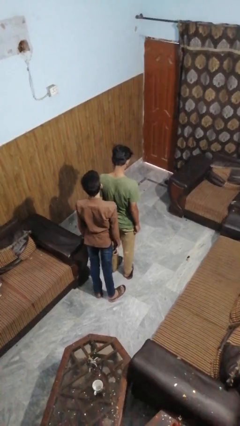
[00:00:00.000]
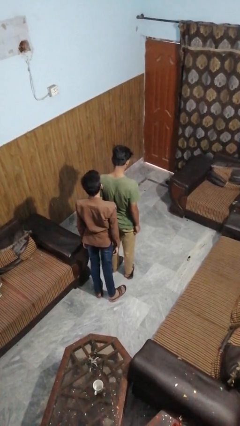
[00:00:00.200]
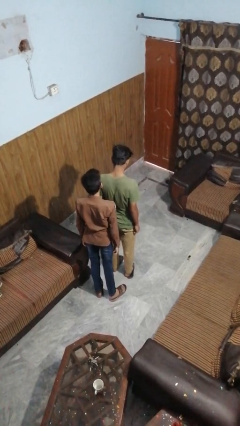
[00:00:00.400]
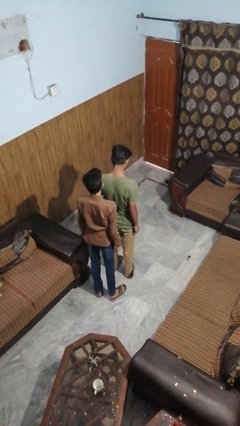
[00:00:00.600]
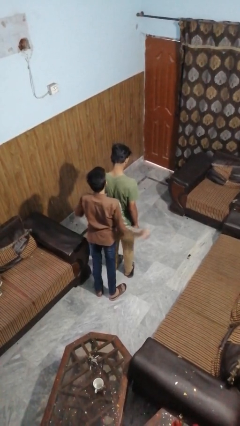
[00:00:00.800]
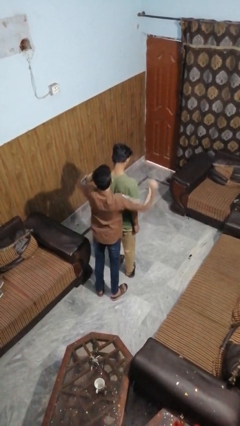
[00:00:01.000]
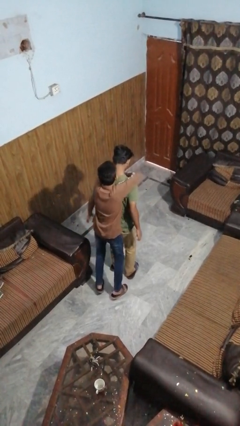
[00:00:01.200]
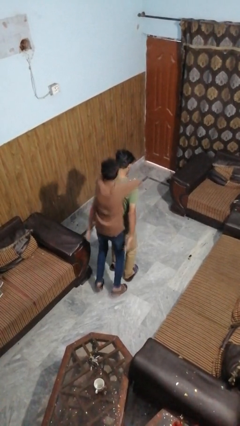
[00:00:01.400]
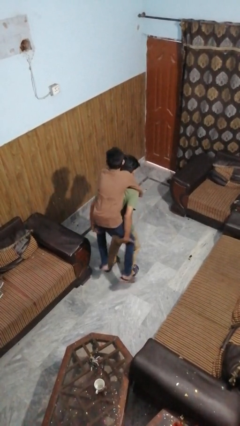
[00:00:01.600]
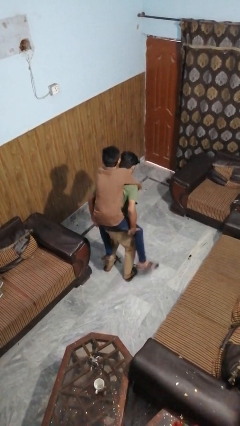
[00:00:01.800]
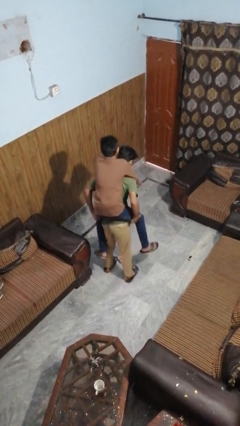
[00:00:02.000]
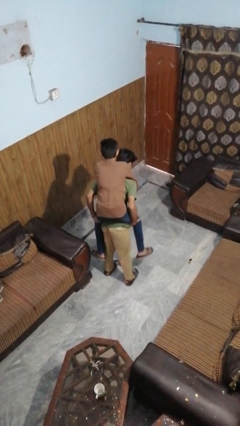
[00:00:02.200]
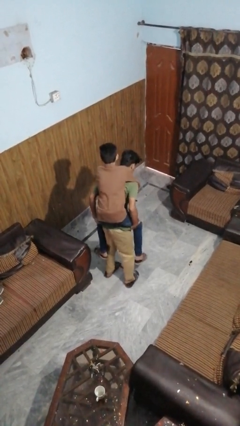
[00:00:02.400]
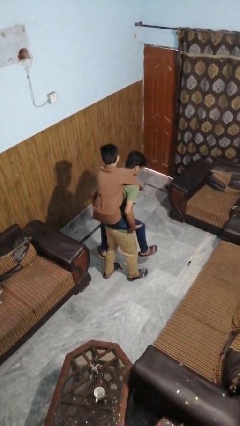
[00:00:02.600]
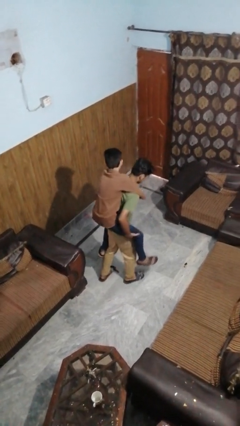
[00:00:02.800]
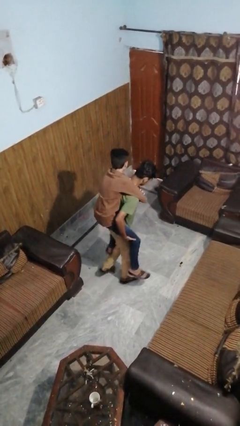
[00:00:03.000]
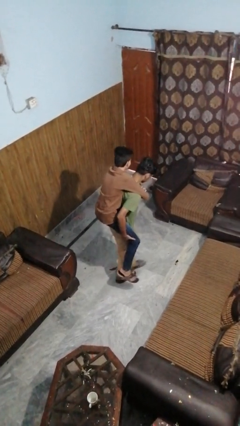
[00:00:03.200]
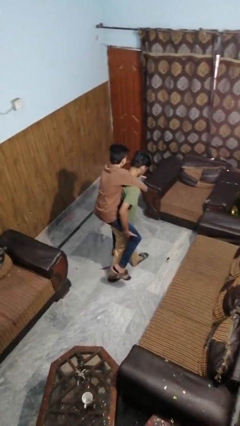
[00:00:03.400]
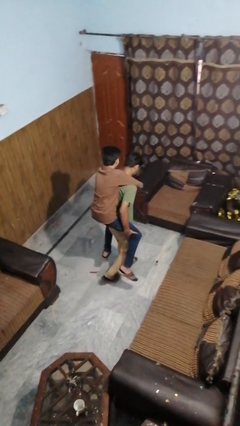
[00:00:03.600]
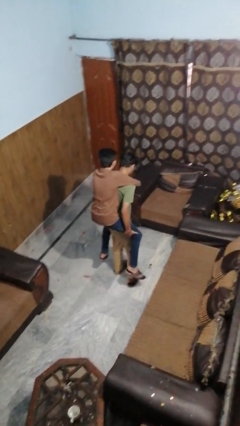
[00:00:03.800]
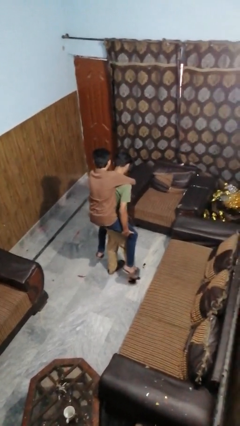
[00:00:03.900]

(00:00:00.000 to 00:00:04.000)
person carries person on back

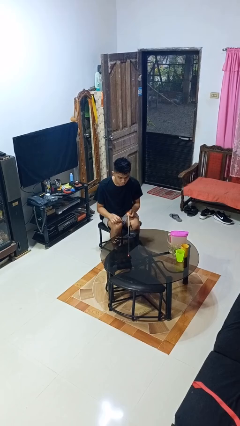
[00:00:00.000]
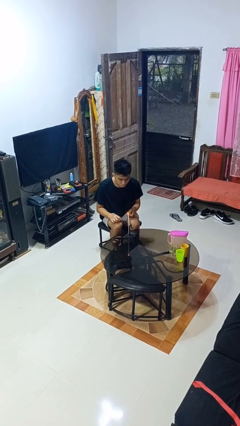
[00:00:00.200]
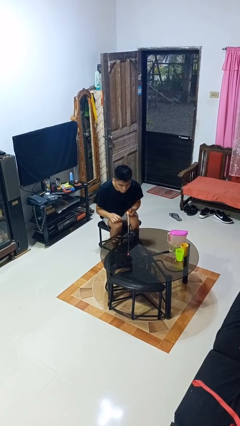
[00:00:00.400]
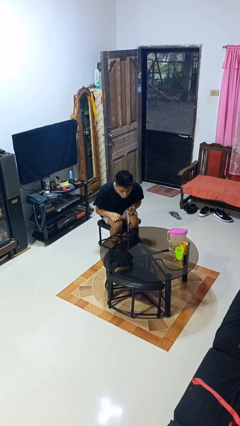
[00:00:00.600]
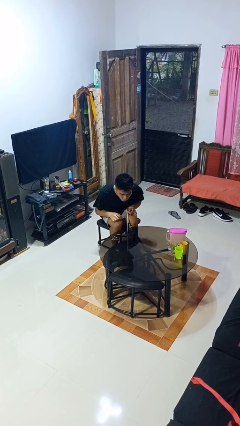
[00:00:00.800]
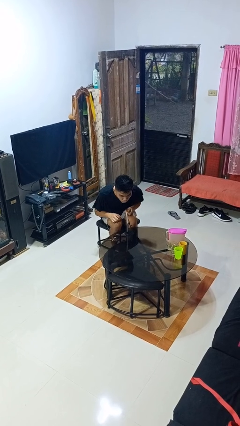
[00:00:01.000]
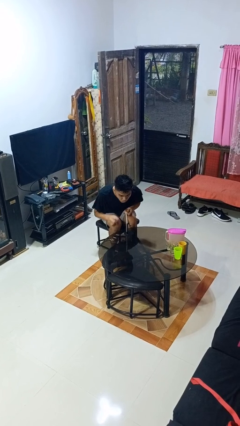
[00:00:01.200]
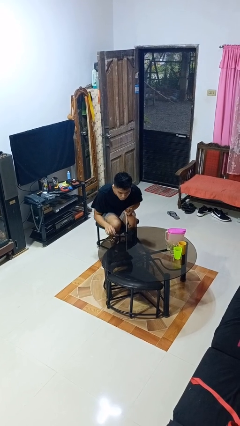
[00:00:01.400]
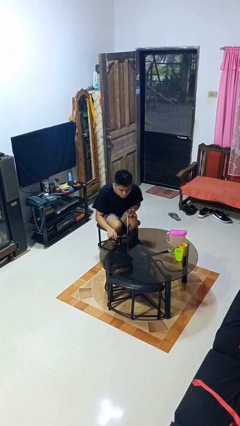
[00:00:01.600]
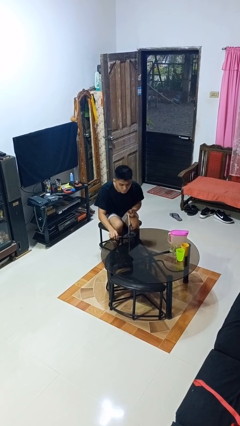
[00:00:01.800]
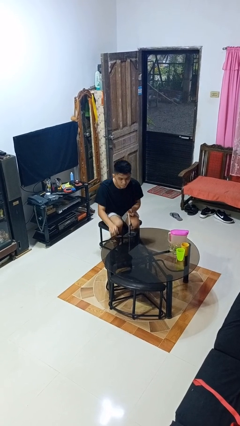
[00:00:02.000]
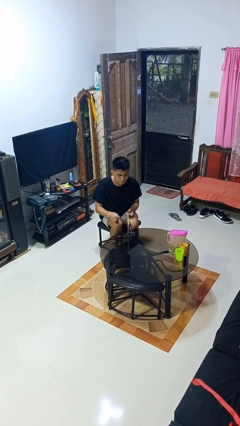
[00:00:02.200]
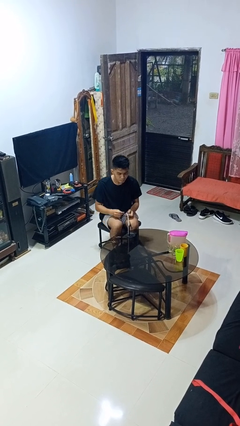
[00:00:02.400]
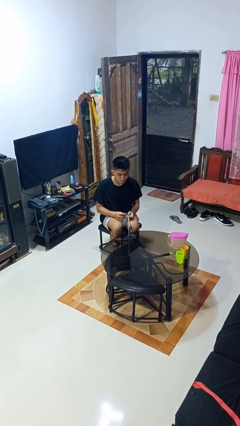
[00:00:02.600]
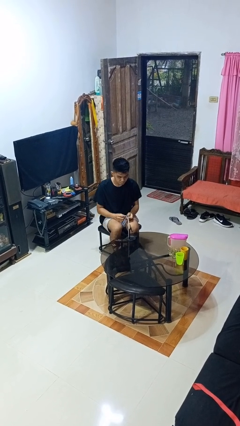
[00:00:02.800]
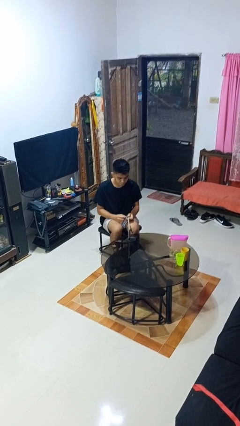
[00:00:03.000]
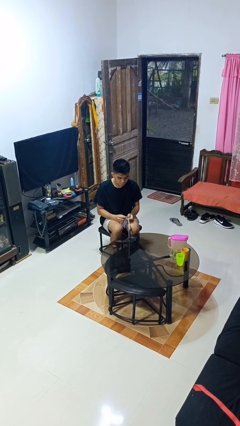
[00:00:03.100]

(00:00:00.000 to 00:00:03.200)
person extinguishes candle

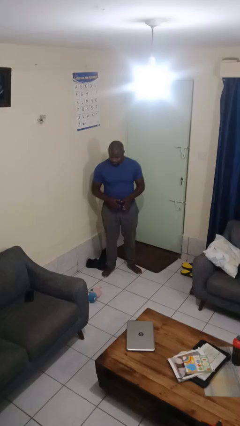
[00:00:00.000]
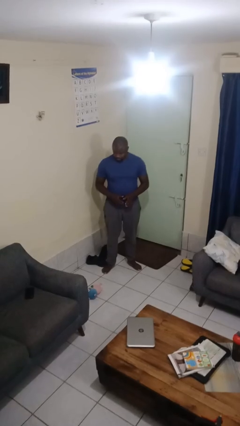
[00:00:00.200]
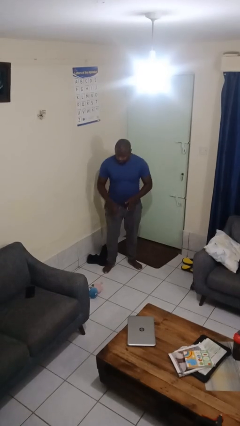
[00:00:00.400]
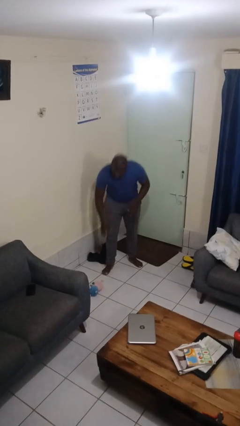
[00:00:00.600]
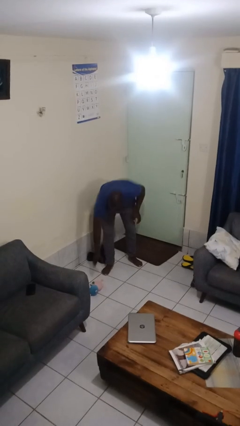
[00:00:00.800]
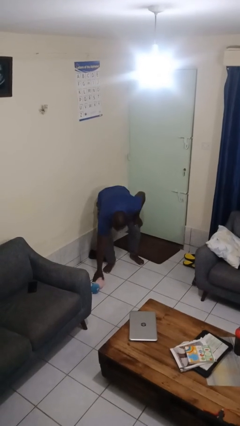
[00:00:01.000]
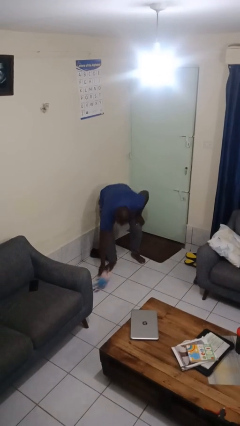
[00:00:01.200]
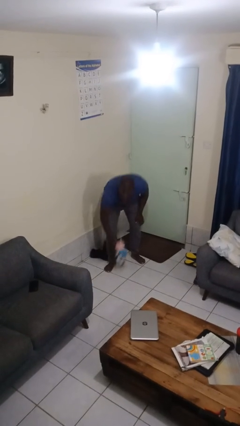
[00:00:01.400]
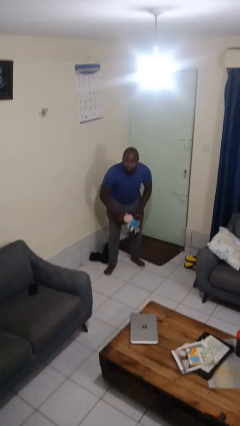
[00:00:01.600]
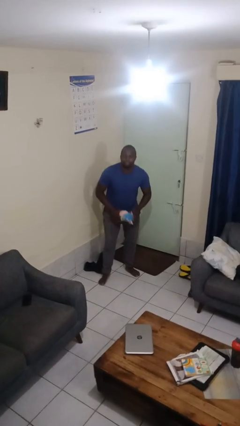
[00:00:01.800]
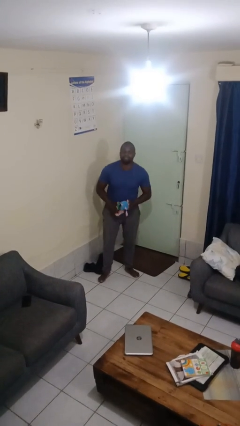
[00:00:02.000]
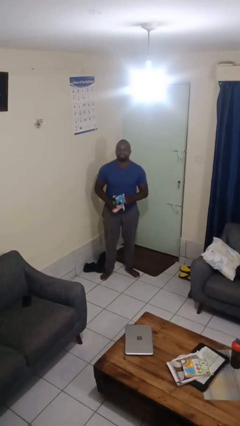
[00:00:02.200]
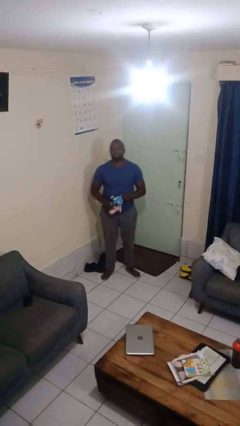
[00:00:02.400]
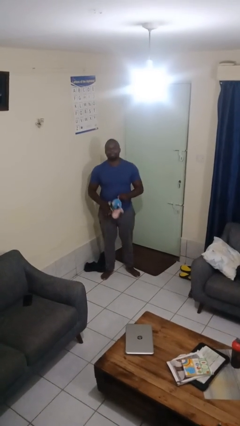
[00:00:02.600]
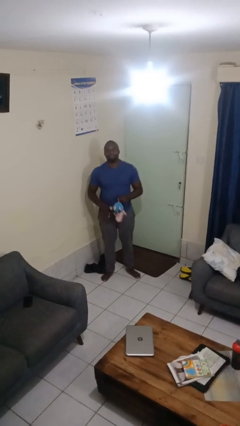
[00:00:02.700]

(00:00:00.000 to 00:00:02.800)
person picks up object from floor

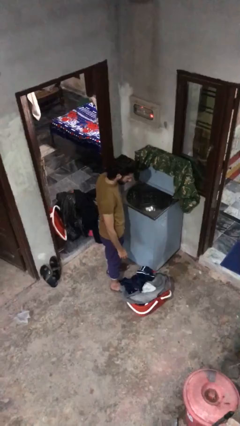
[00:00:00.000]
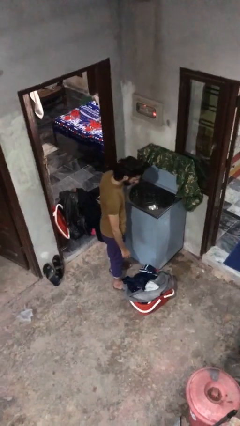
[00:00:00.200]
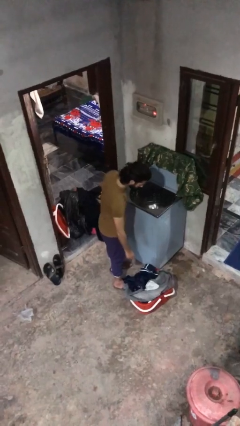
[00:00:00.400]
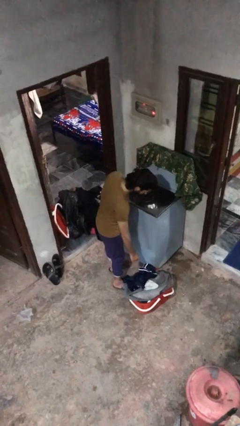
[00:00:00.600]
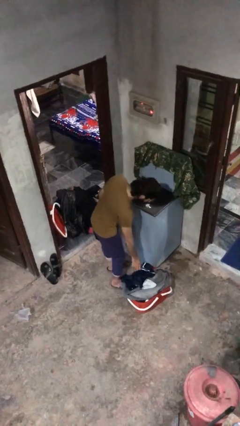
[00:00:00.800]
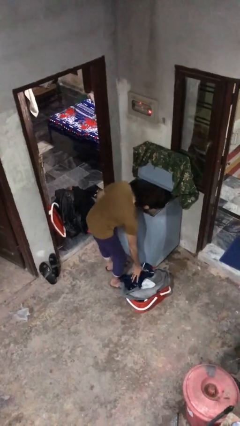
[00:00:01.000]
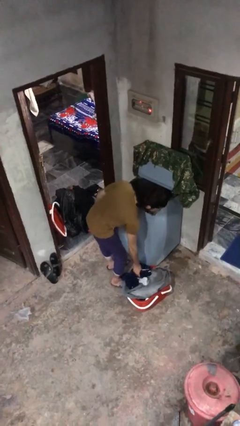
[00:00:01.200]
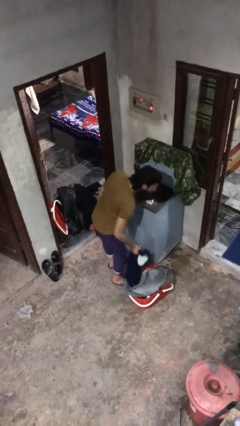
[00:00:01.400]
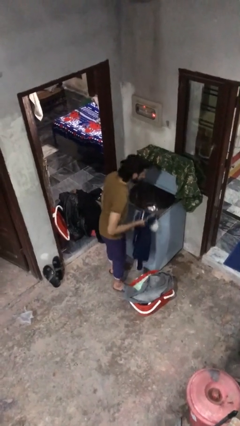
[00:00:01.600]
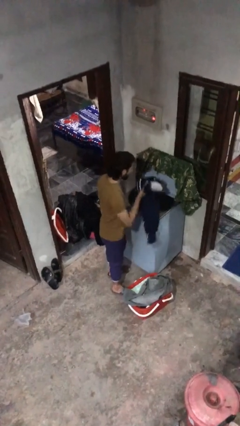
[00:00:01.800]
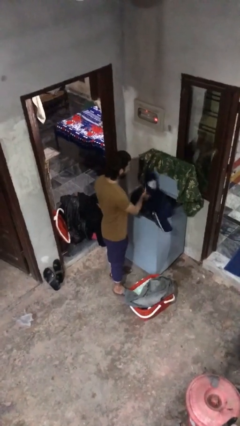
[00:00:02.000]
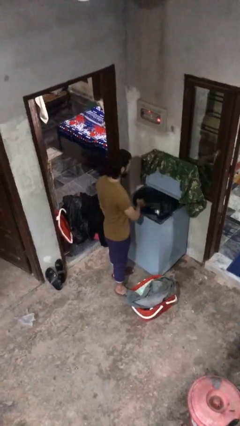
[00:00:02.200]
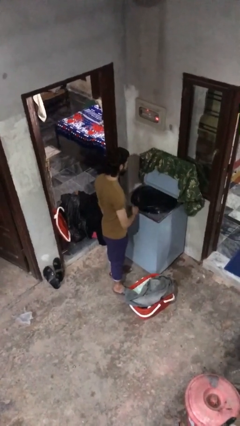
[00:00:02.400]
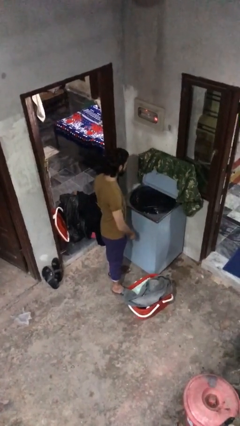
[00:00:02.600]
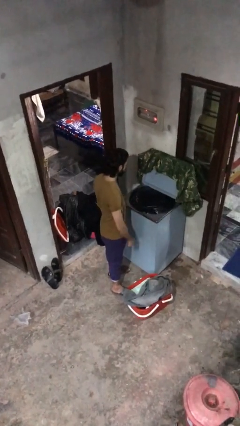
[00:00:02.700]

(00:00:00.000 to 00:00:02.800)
person loads clotheswasher

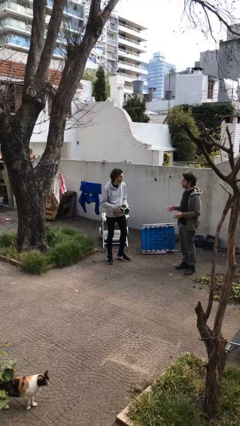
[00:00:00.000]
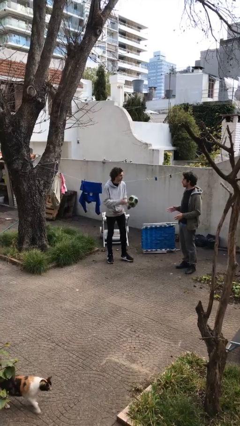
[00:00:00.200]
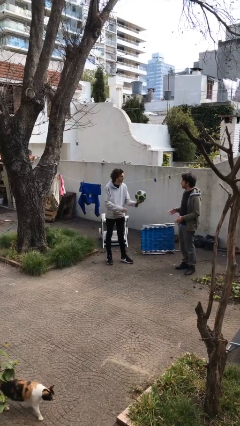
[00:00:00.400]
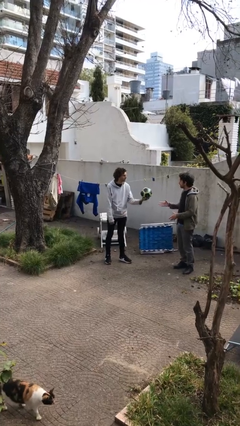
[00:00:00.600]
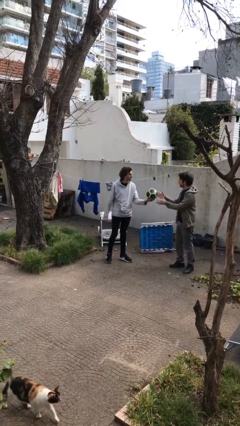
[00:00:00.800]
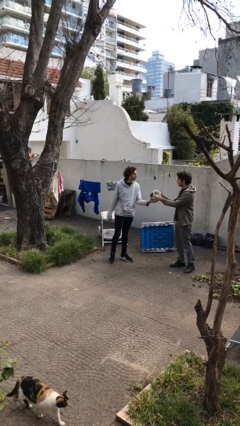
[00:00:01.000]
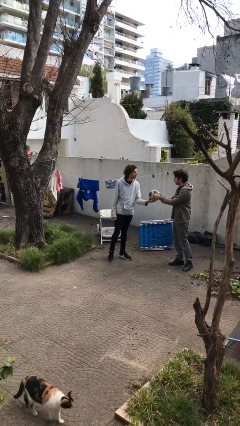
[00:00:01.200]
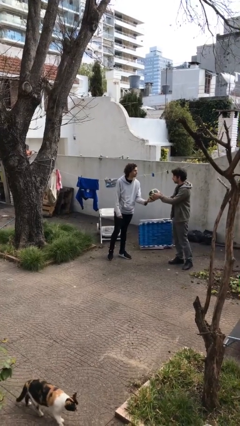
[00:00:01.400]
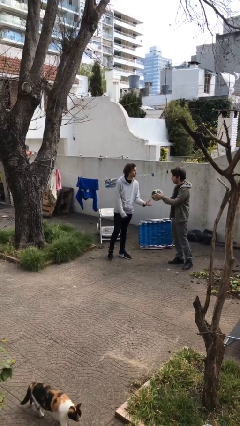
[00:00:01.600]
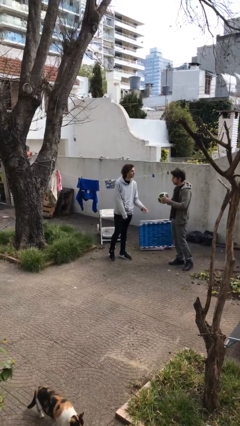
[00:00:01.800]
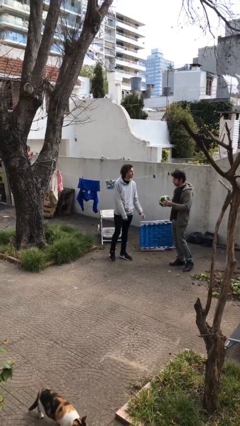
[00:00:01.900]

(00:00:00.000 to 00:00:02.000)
person transfers object to person

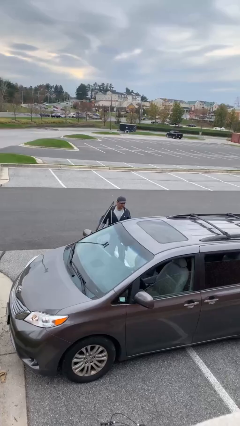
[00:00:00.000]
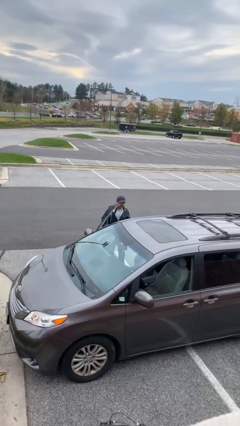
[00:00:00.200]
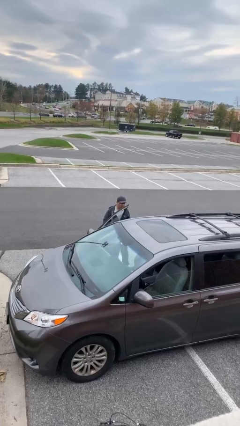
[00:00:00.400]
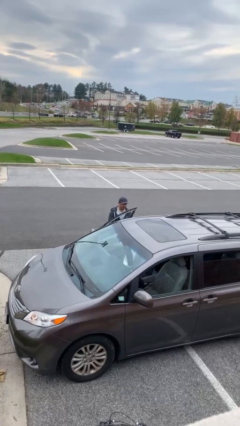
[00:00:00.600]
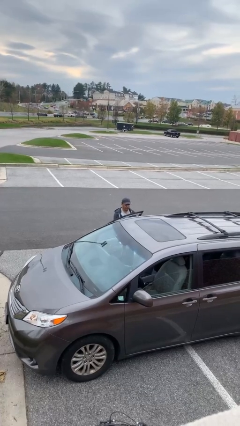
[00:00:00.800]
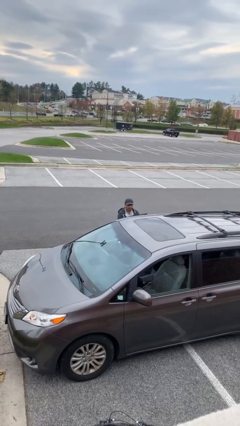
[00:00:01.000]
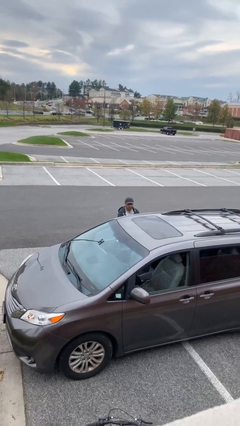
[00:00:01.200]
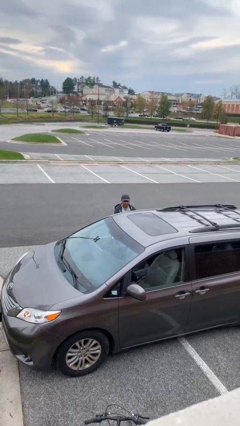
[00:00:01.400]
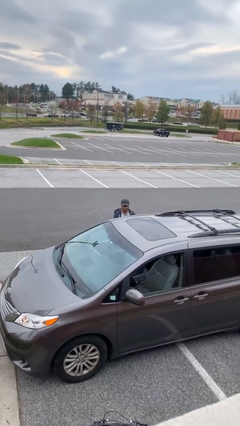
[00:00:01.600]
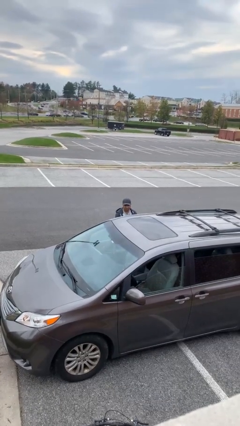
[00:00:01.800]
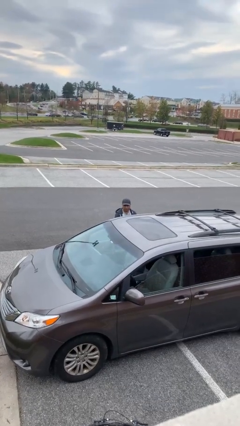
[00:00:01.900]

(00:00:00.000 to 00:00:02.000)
person closes car door

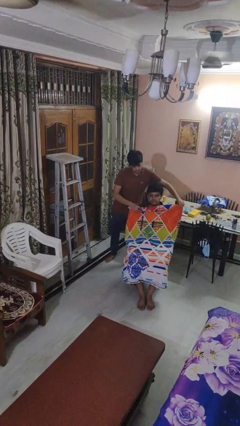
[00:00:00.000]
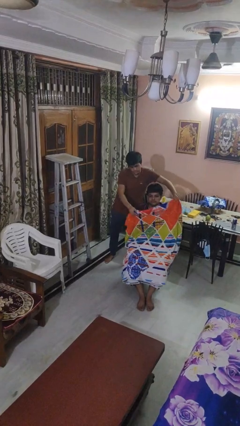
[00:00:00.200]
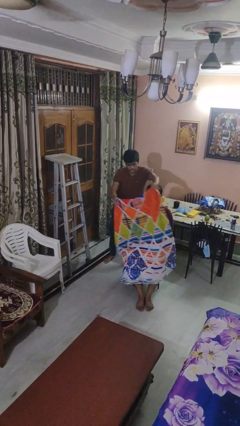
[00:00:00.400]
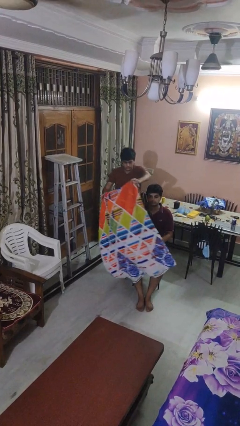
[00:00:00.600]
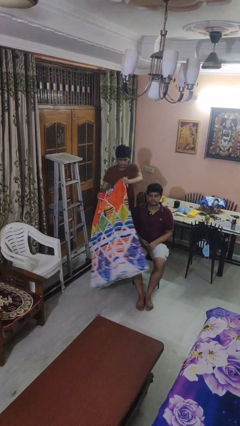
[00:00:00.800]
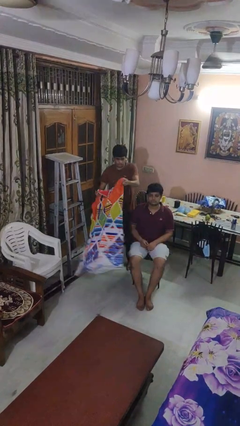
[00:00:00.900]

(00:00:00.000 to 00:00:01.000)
person uncovers friend with blanket
